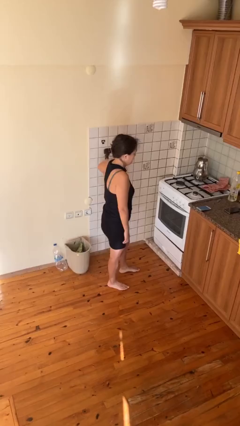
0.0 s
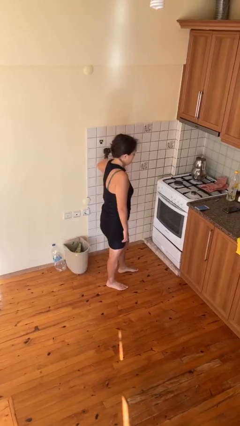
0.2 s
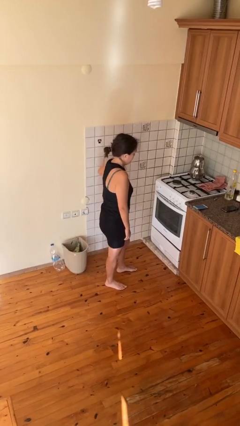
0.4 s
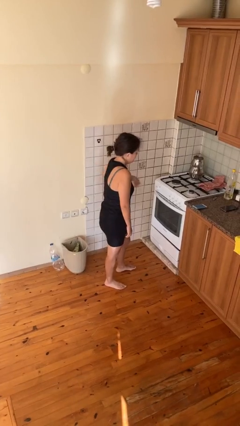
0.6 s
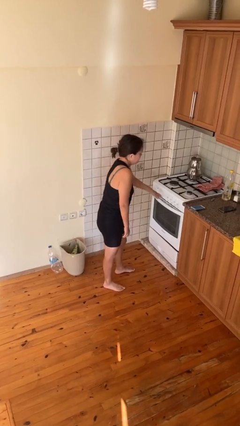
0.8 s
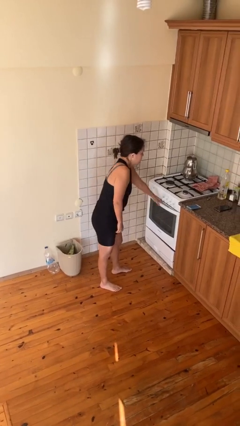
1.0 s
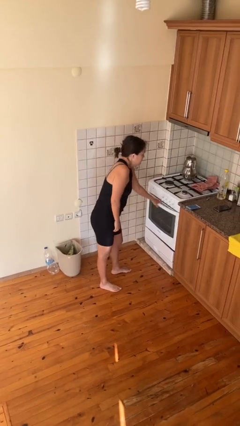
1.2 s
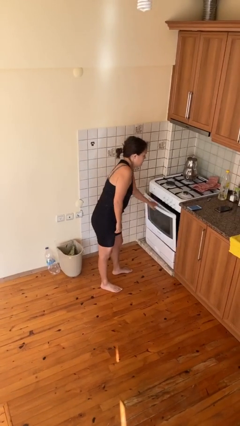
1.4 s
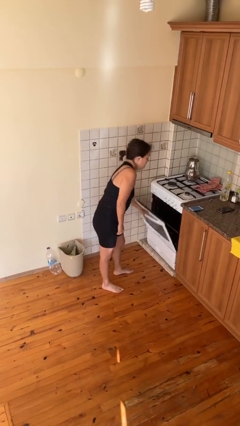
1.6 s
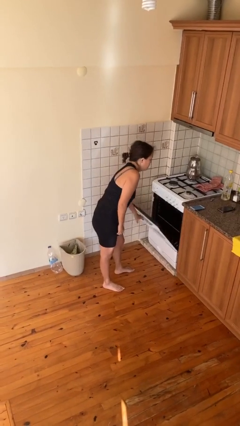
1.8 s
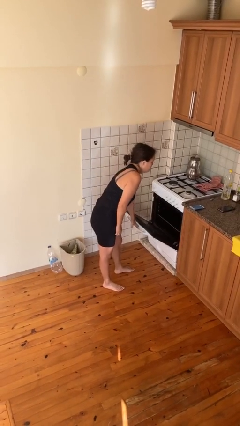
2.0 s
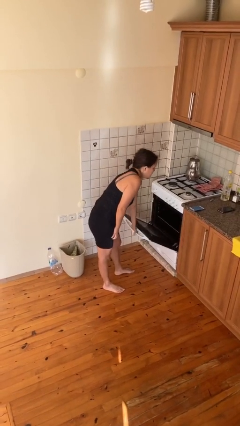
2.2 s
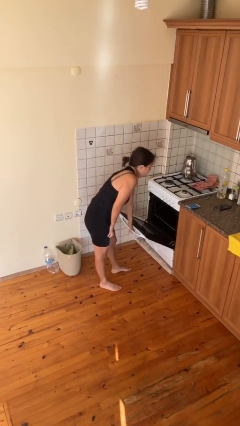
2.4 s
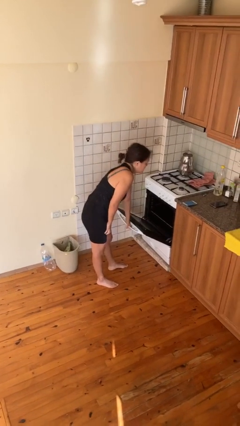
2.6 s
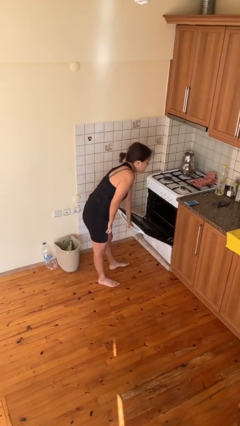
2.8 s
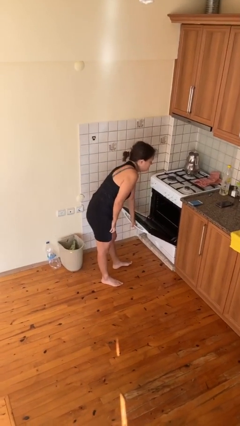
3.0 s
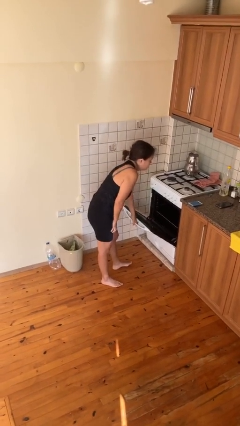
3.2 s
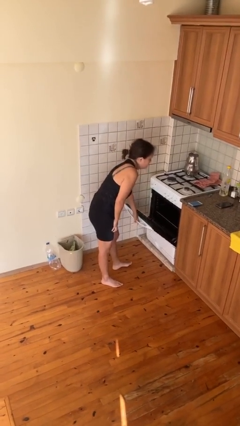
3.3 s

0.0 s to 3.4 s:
person opens oven door

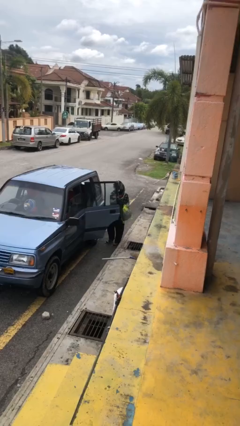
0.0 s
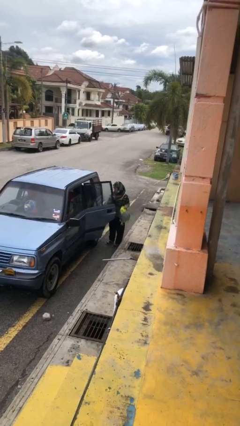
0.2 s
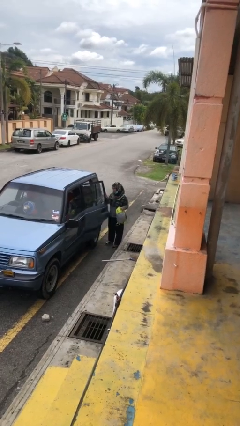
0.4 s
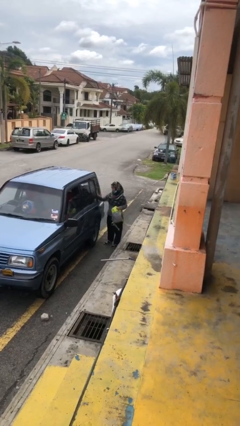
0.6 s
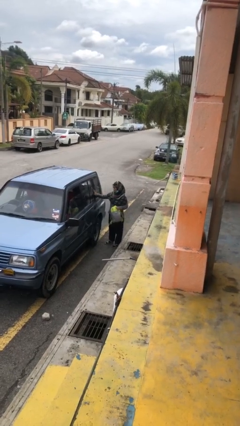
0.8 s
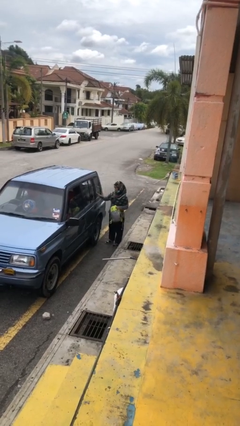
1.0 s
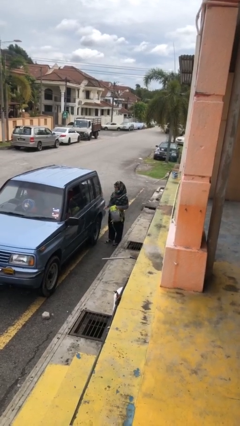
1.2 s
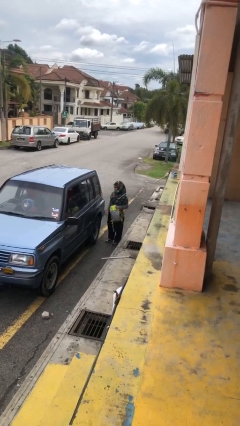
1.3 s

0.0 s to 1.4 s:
person closes car door

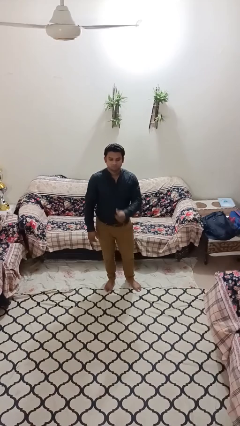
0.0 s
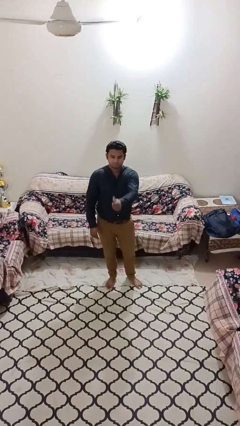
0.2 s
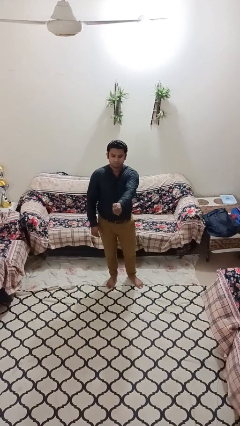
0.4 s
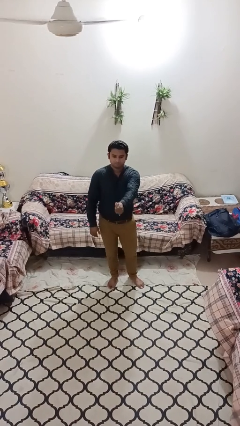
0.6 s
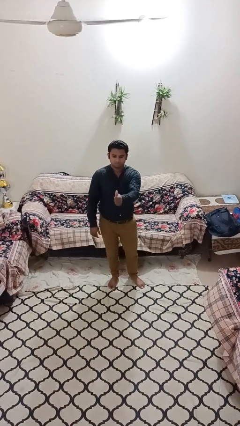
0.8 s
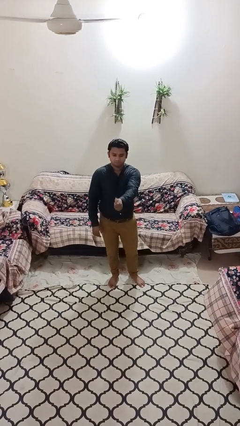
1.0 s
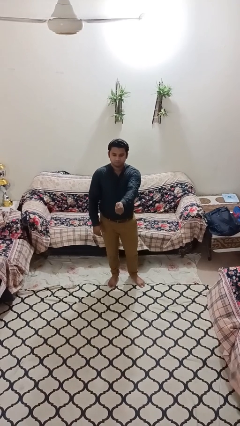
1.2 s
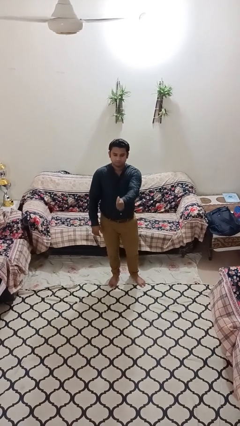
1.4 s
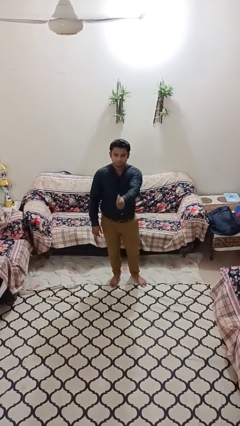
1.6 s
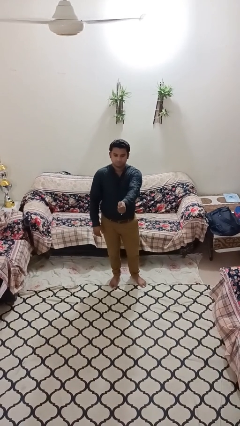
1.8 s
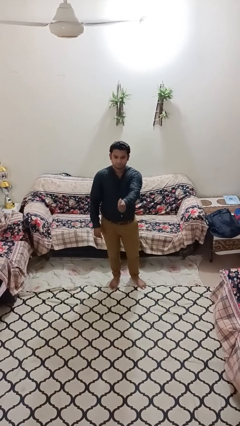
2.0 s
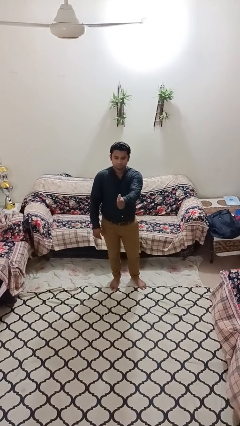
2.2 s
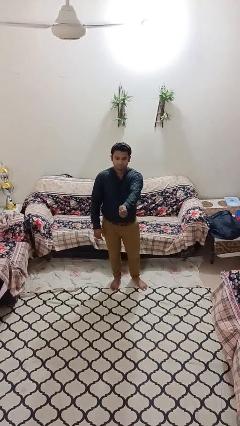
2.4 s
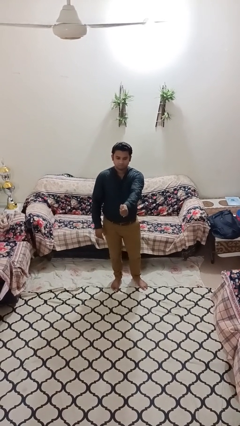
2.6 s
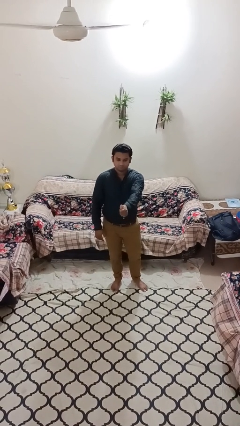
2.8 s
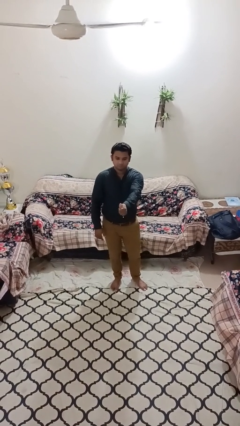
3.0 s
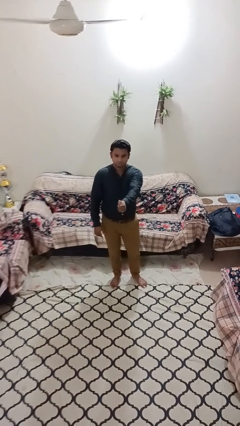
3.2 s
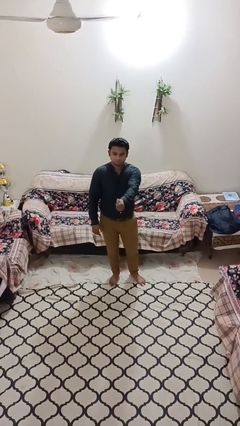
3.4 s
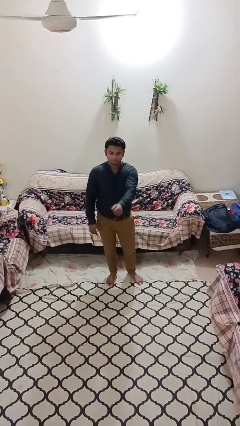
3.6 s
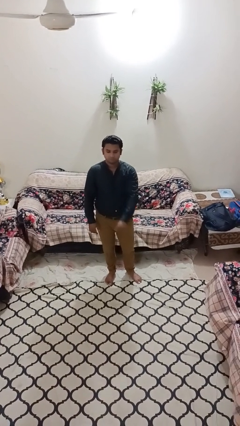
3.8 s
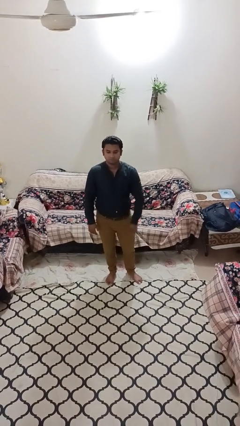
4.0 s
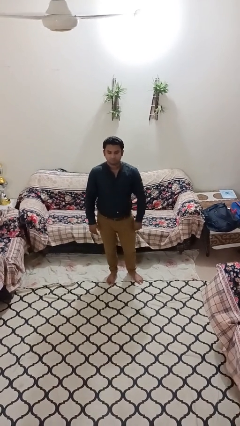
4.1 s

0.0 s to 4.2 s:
person gestures thumbs up

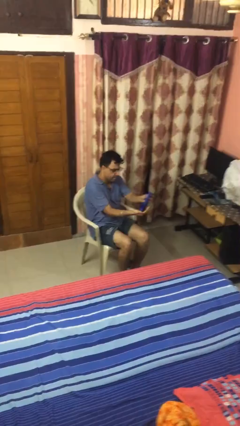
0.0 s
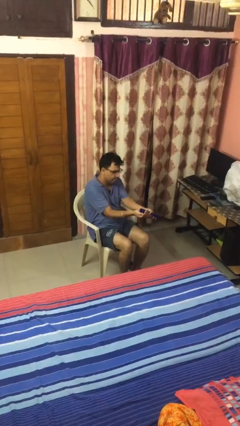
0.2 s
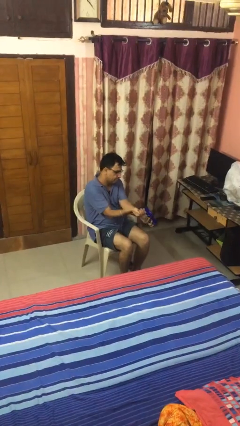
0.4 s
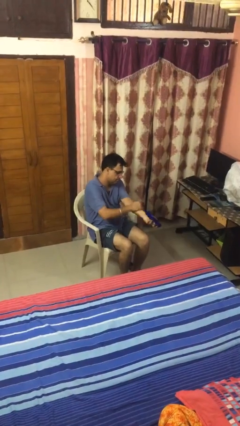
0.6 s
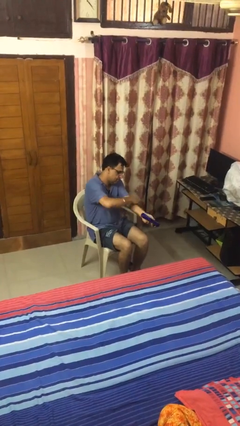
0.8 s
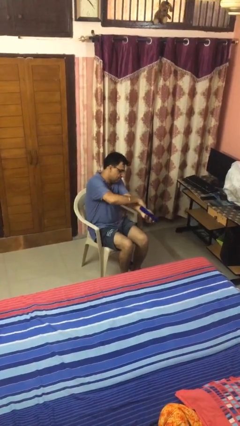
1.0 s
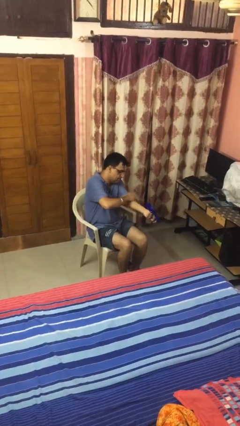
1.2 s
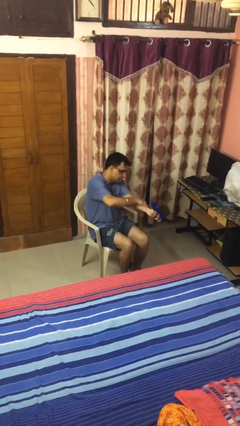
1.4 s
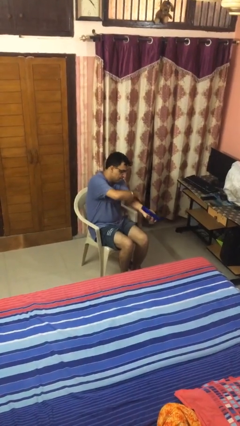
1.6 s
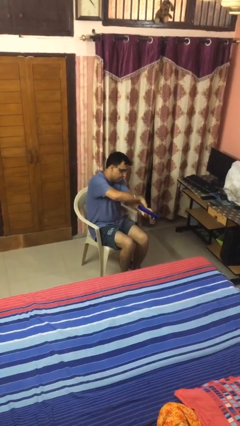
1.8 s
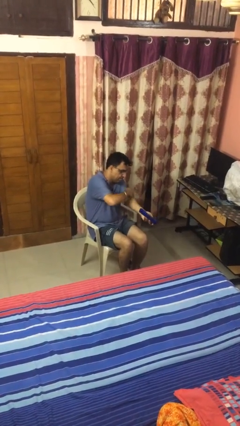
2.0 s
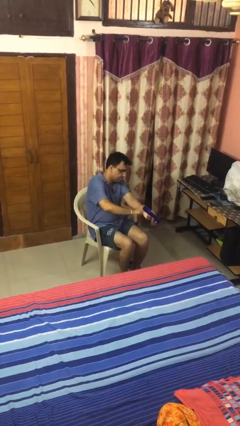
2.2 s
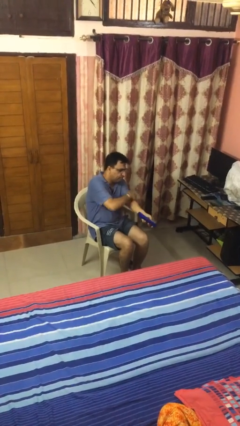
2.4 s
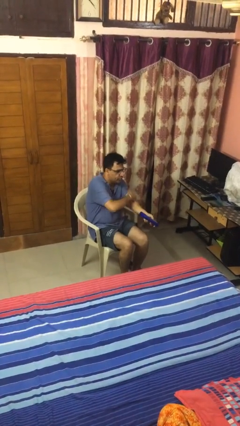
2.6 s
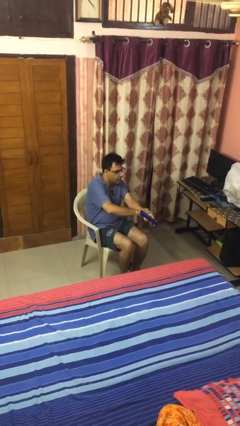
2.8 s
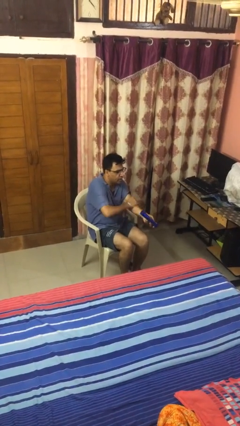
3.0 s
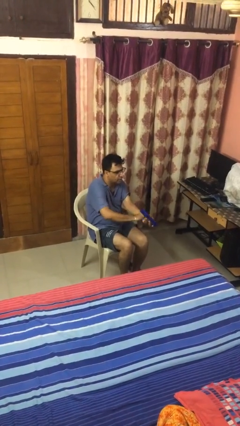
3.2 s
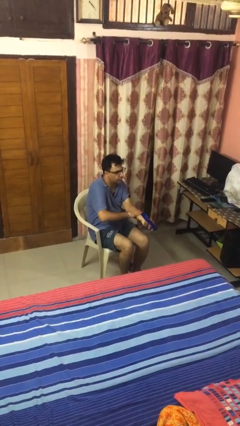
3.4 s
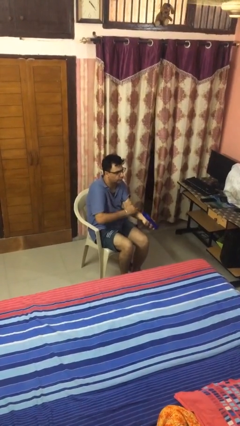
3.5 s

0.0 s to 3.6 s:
person applies sunscreen

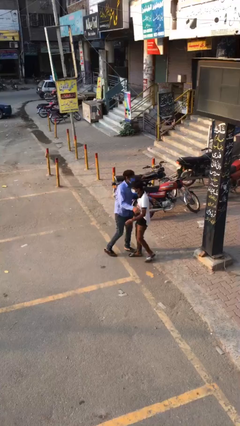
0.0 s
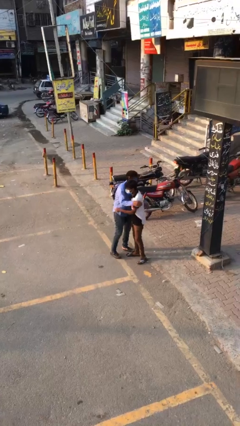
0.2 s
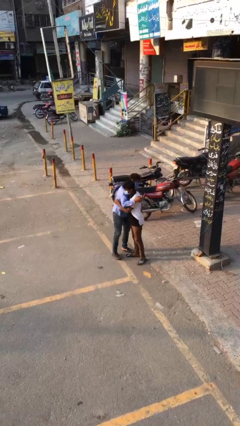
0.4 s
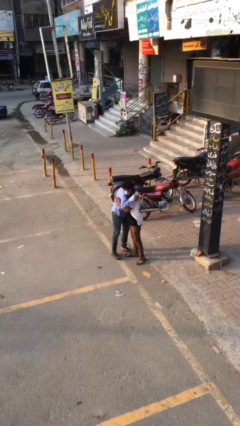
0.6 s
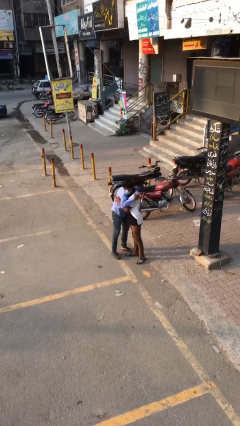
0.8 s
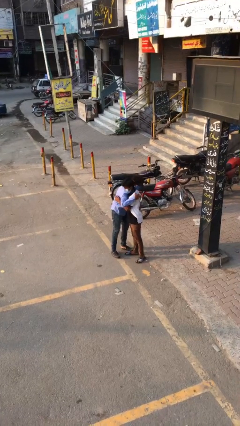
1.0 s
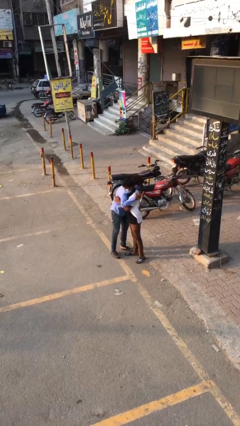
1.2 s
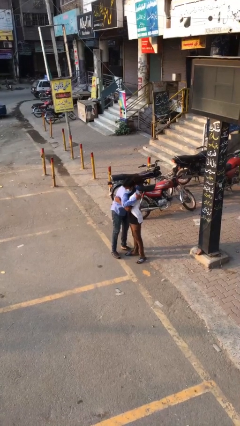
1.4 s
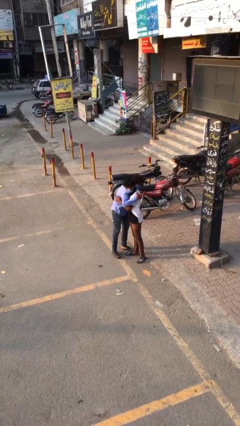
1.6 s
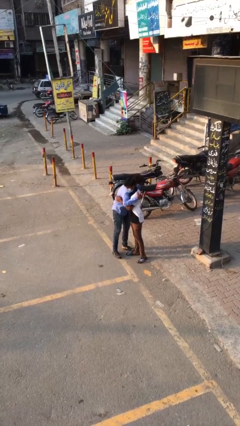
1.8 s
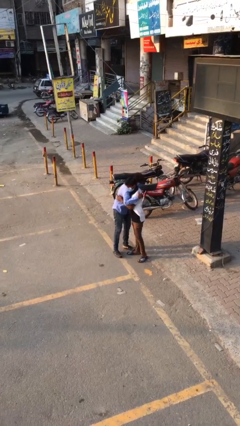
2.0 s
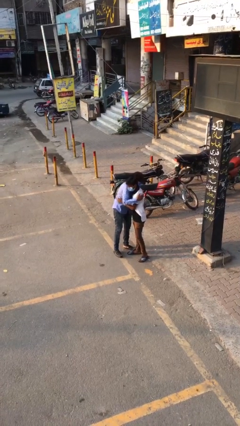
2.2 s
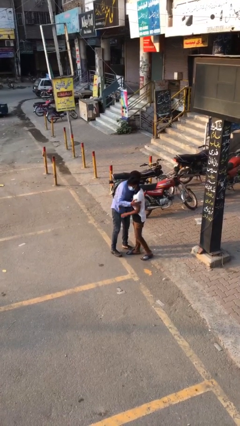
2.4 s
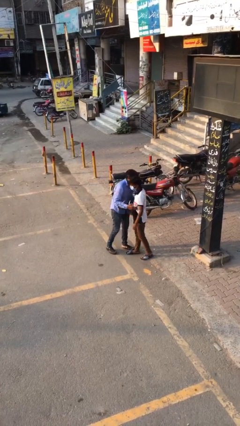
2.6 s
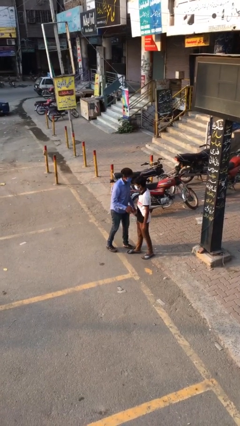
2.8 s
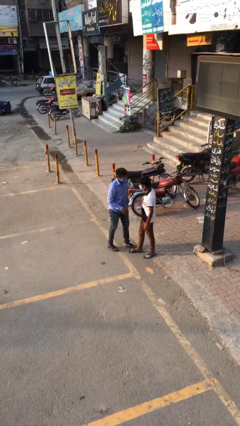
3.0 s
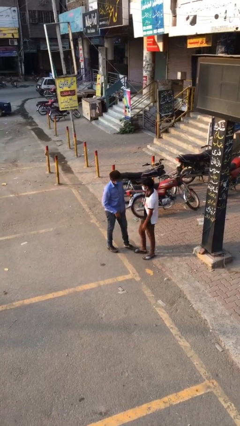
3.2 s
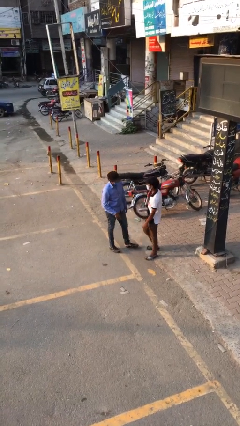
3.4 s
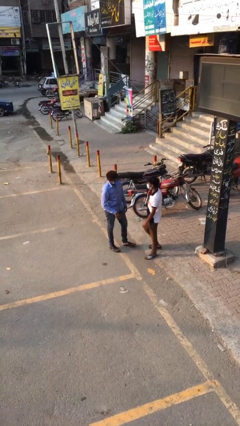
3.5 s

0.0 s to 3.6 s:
person embraces person

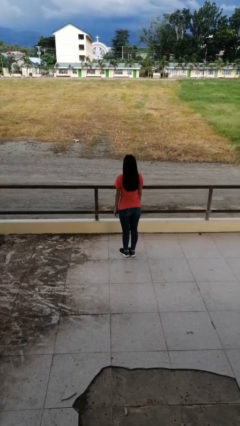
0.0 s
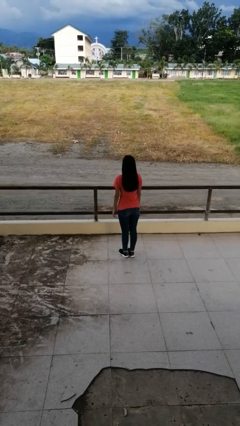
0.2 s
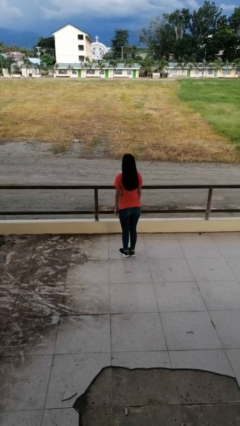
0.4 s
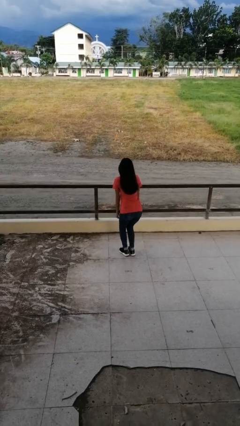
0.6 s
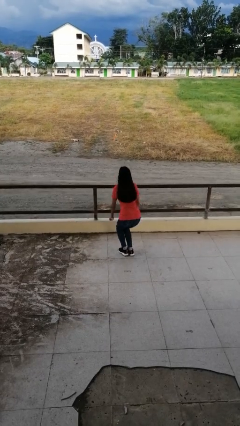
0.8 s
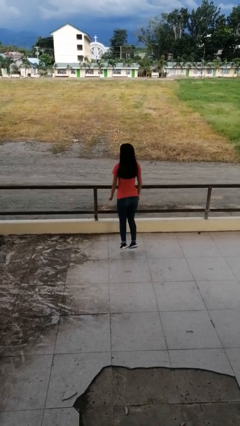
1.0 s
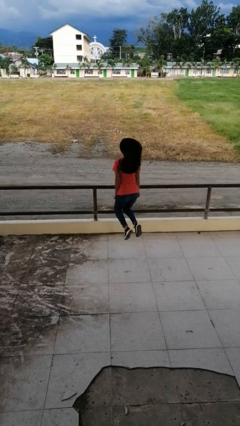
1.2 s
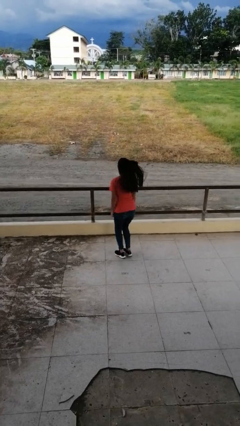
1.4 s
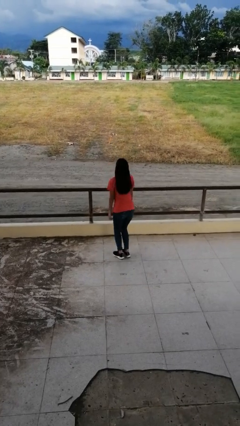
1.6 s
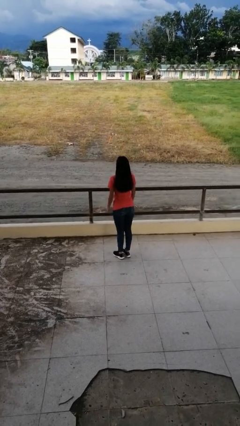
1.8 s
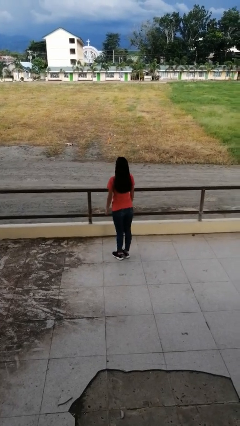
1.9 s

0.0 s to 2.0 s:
person jumps
